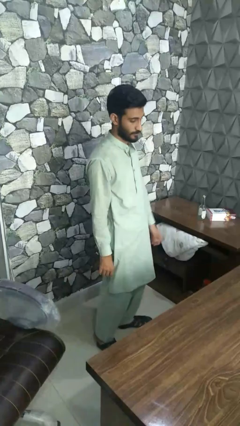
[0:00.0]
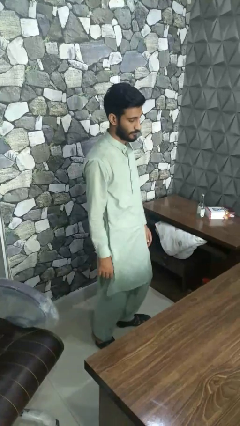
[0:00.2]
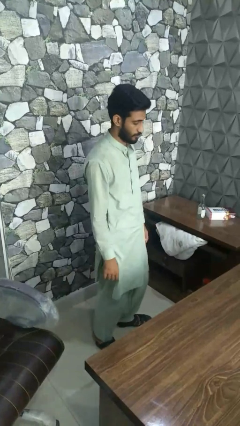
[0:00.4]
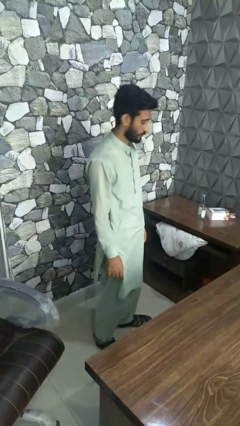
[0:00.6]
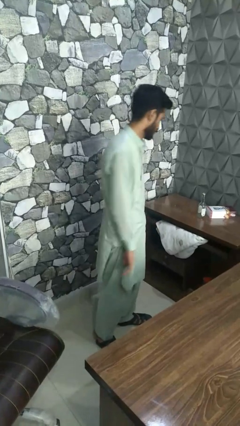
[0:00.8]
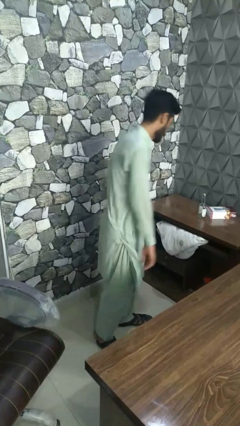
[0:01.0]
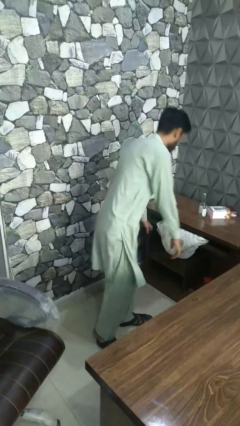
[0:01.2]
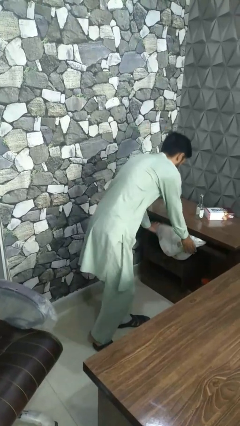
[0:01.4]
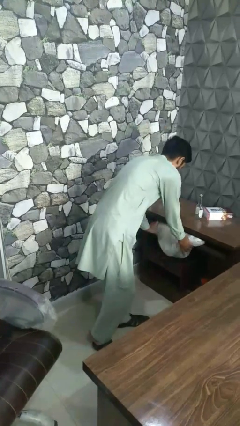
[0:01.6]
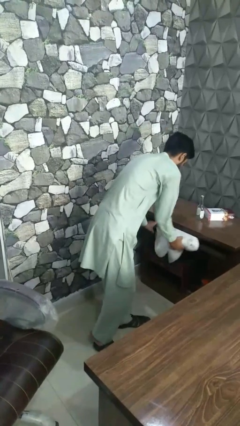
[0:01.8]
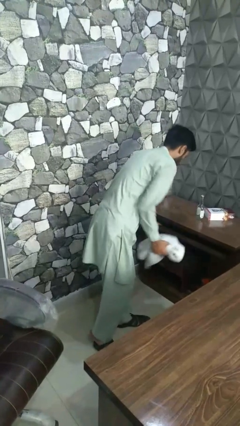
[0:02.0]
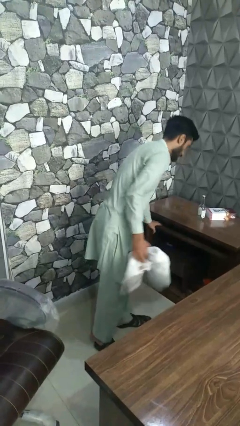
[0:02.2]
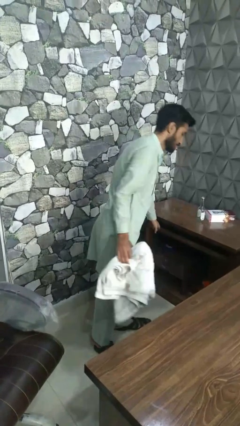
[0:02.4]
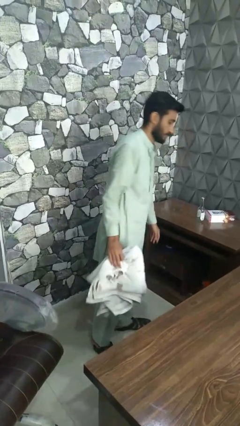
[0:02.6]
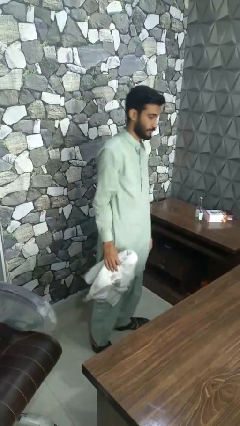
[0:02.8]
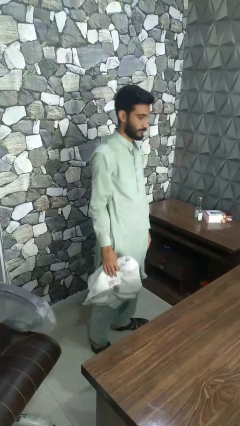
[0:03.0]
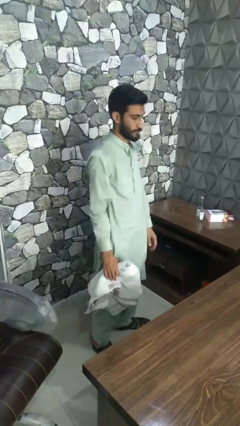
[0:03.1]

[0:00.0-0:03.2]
person takes clothes from dresser

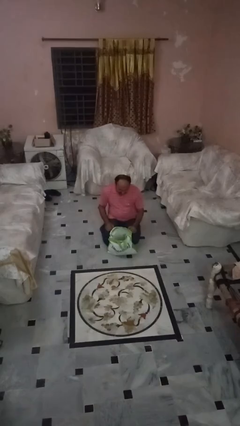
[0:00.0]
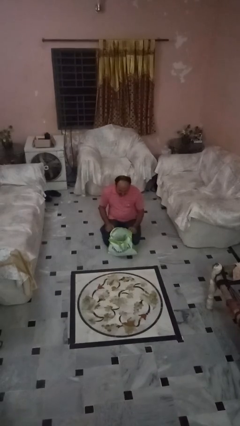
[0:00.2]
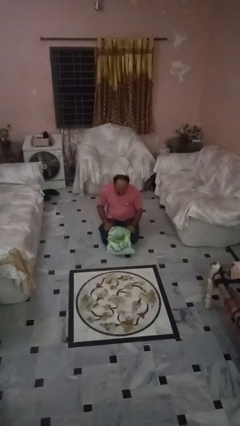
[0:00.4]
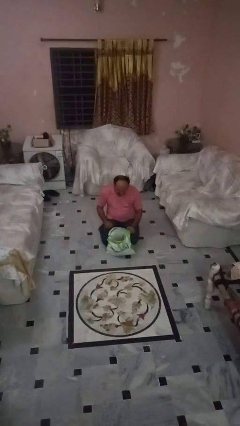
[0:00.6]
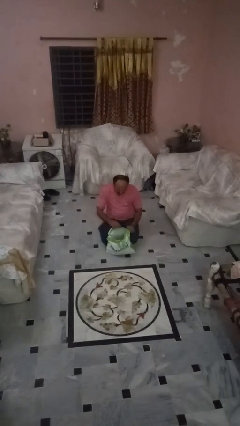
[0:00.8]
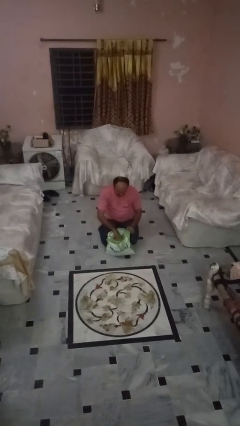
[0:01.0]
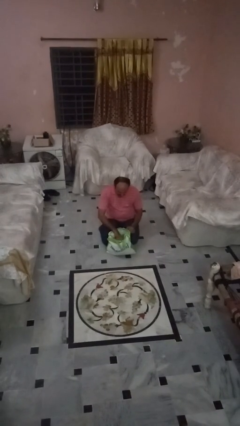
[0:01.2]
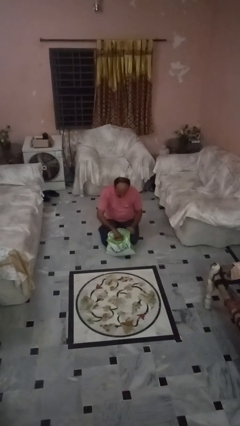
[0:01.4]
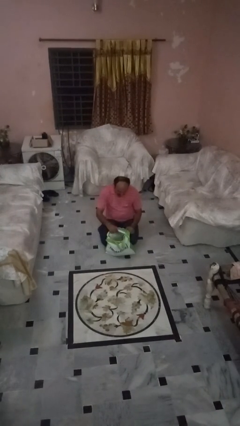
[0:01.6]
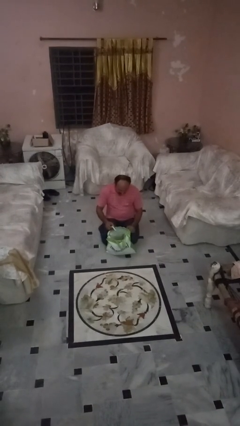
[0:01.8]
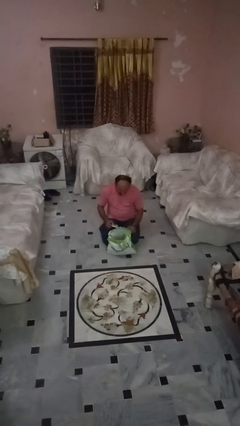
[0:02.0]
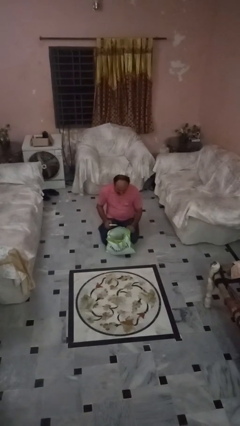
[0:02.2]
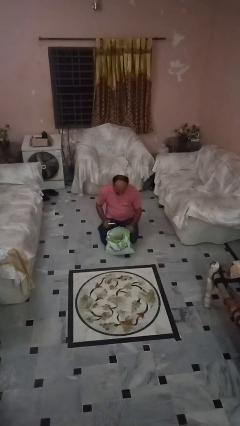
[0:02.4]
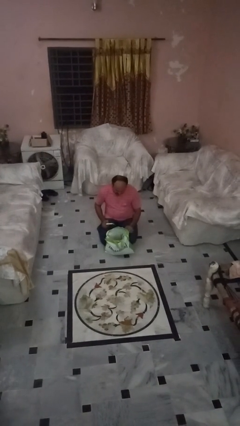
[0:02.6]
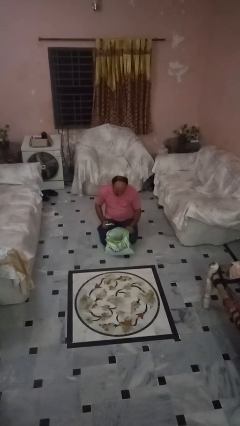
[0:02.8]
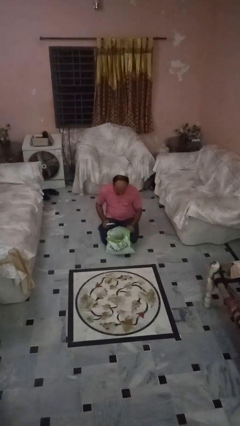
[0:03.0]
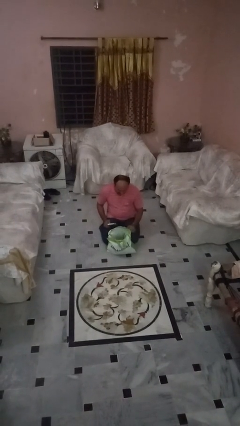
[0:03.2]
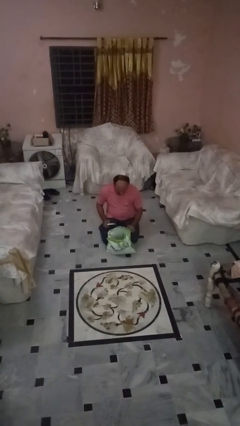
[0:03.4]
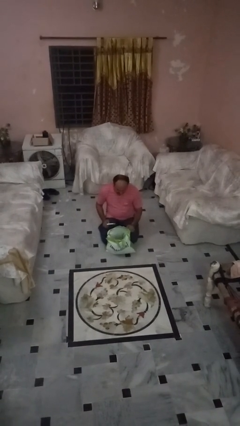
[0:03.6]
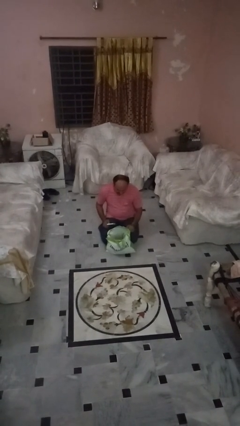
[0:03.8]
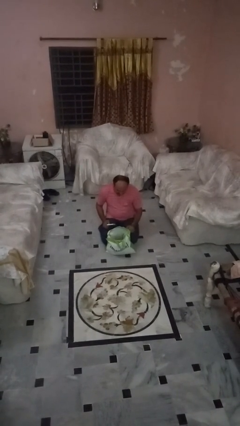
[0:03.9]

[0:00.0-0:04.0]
person takes object from bag

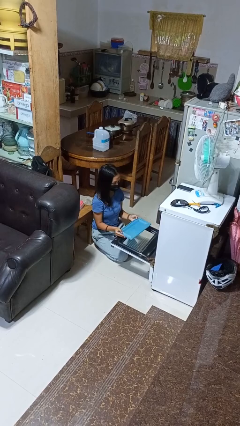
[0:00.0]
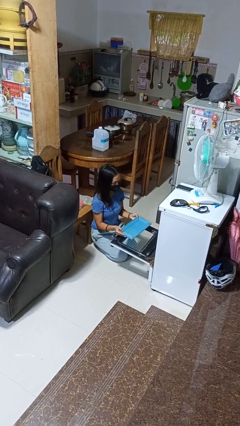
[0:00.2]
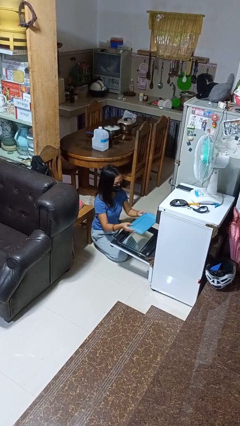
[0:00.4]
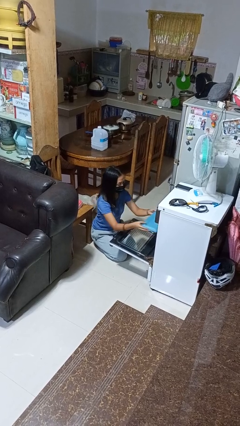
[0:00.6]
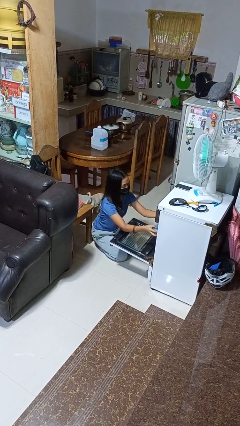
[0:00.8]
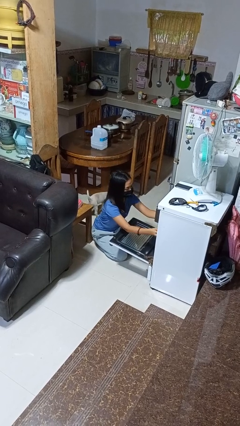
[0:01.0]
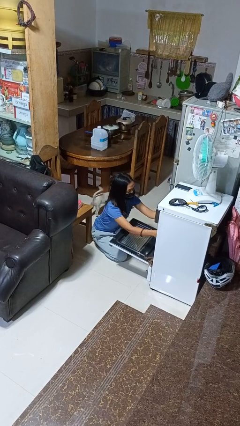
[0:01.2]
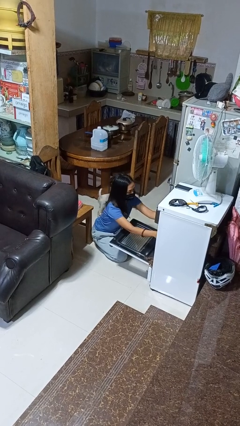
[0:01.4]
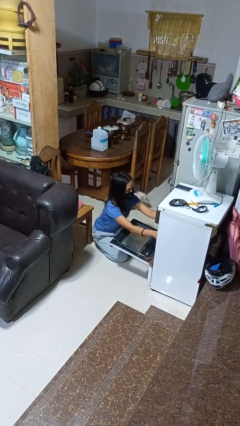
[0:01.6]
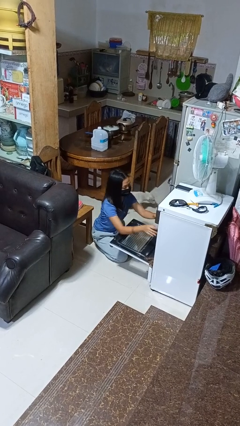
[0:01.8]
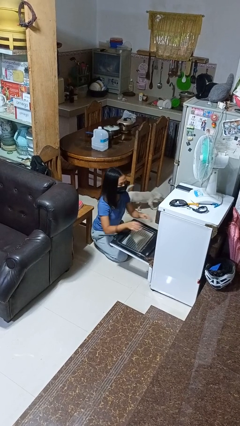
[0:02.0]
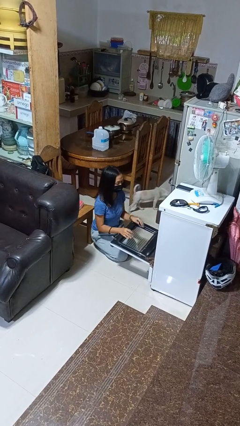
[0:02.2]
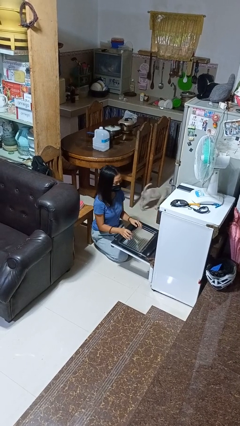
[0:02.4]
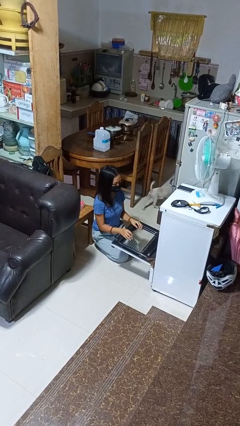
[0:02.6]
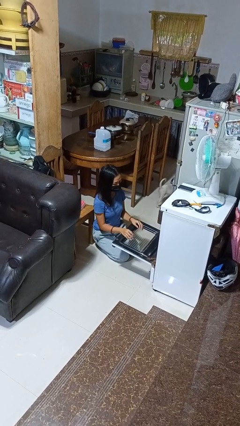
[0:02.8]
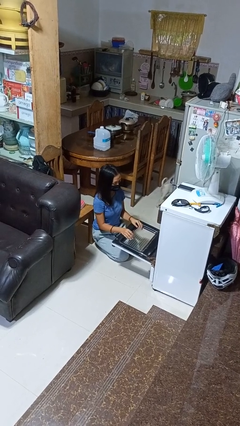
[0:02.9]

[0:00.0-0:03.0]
person puts object into oven

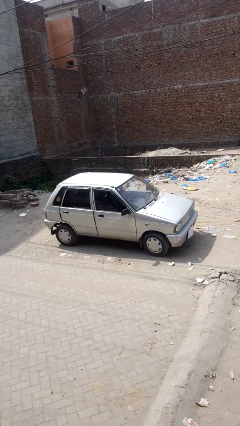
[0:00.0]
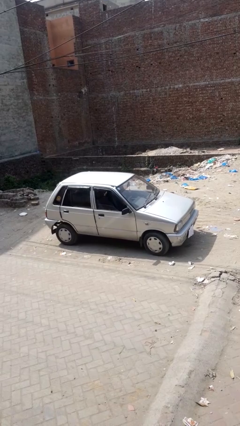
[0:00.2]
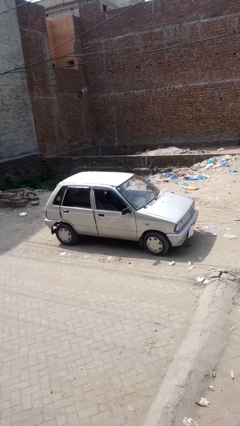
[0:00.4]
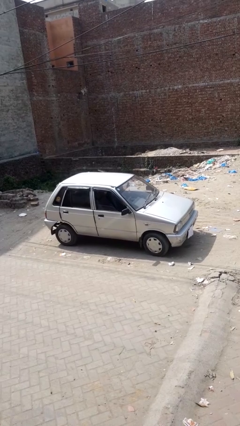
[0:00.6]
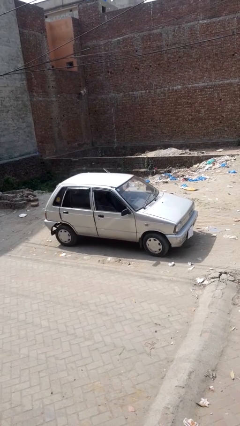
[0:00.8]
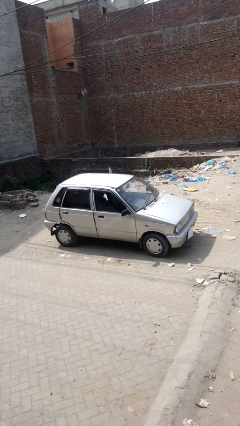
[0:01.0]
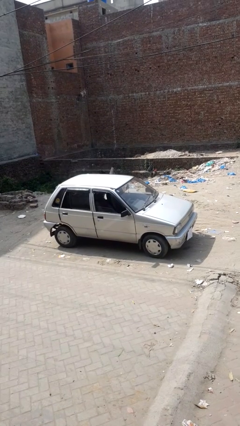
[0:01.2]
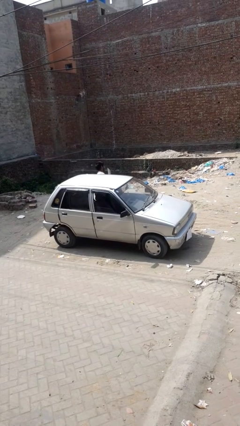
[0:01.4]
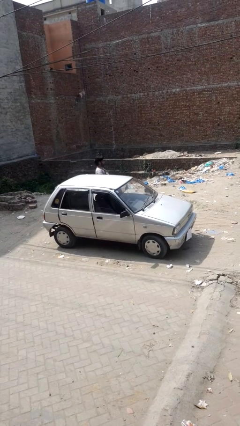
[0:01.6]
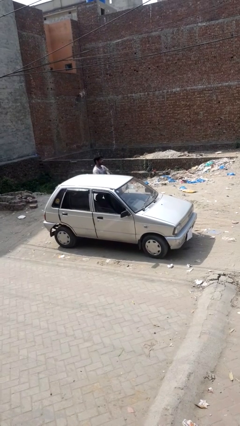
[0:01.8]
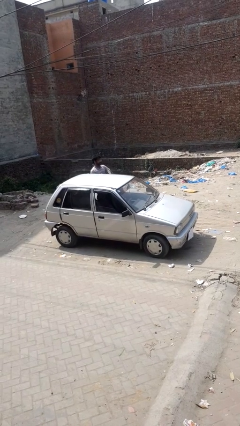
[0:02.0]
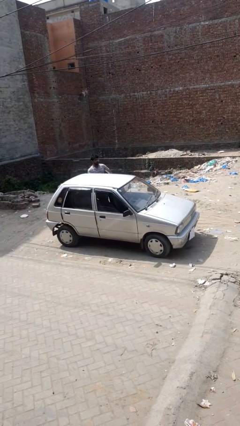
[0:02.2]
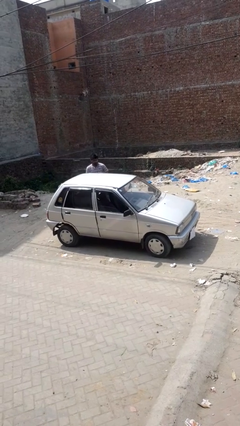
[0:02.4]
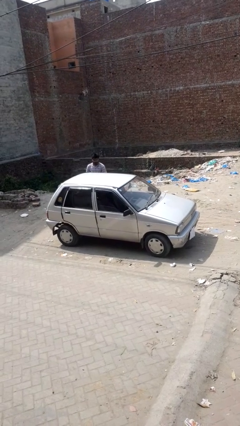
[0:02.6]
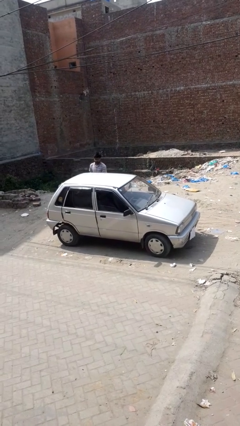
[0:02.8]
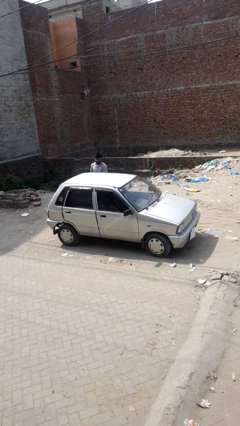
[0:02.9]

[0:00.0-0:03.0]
car drops off person

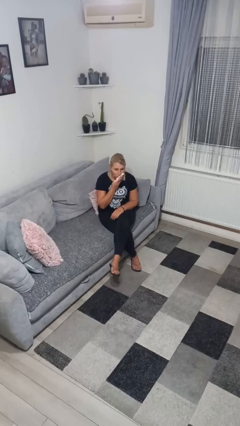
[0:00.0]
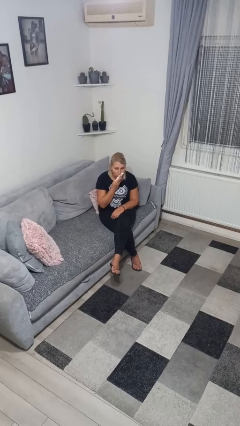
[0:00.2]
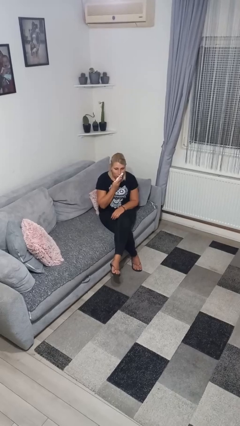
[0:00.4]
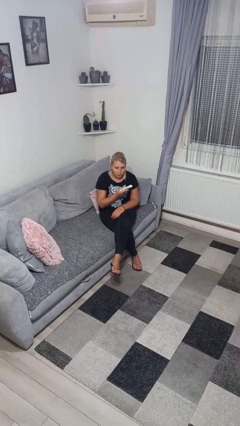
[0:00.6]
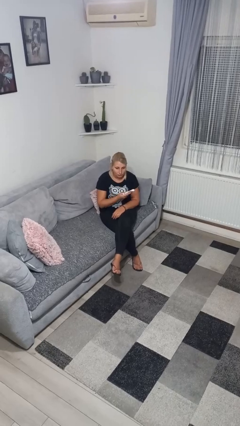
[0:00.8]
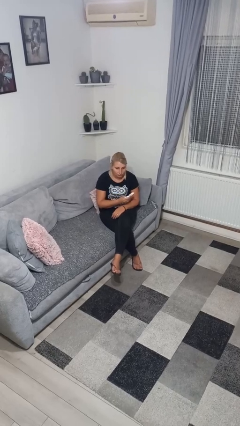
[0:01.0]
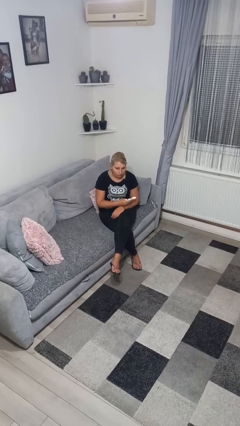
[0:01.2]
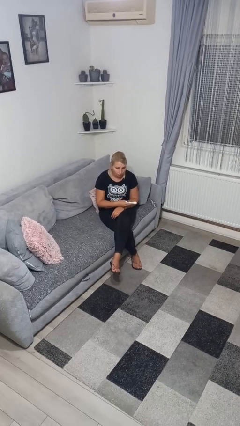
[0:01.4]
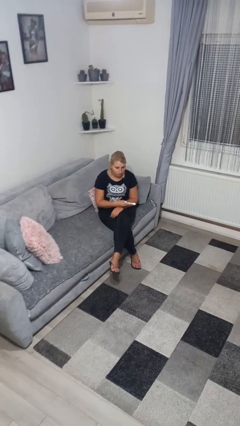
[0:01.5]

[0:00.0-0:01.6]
person wipes mouth with napkin

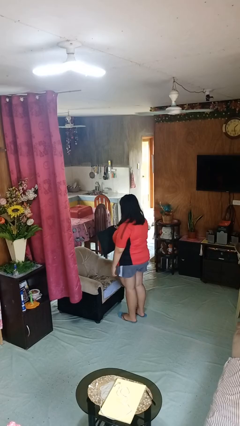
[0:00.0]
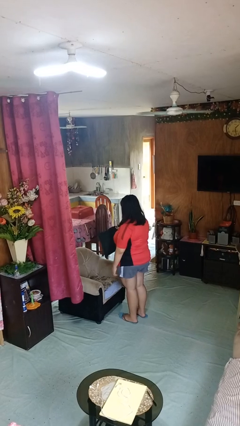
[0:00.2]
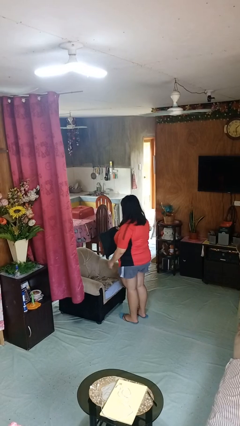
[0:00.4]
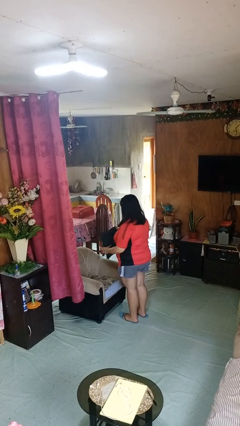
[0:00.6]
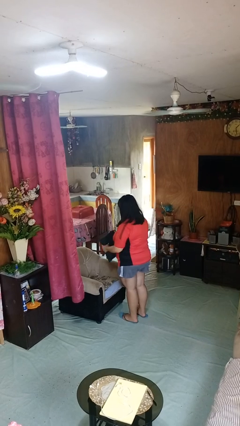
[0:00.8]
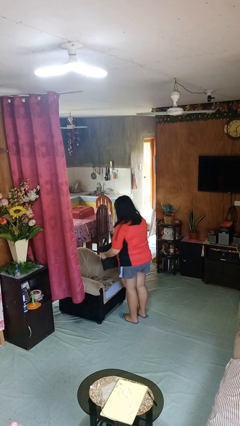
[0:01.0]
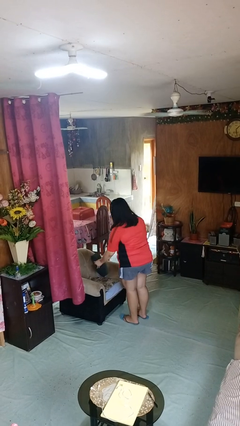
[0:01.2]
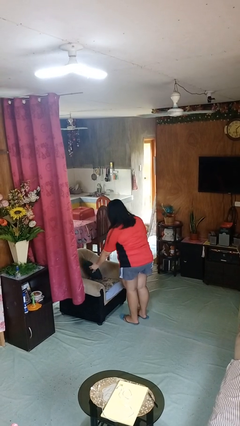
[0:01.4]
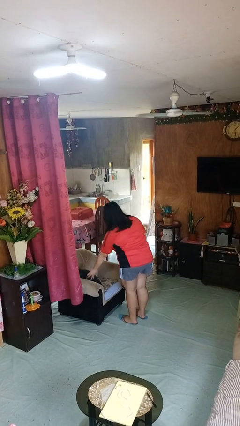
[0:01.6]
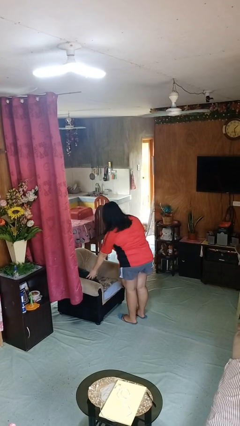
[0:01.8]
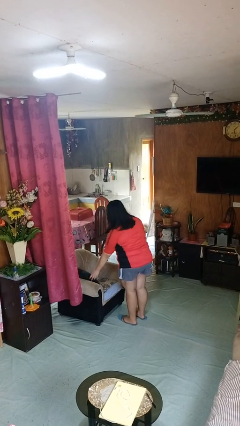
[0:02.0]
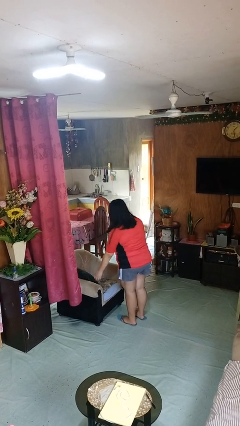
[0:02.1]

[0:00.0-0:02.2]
person puts down object on couch

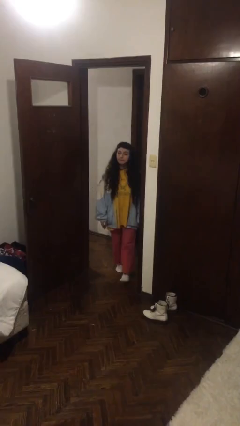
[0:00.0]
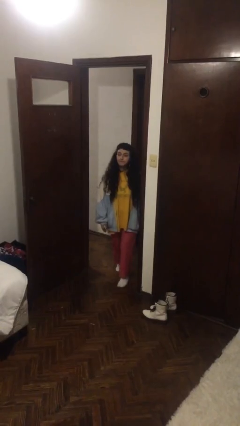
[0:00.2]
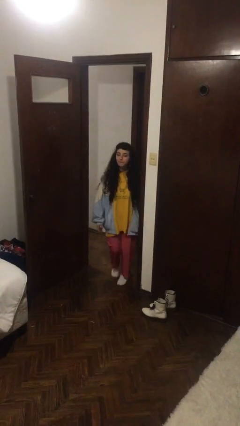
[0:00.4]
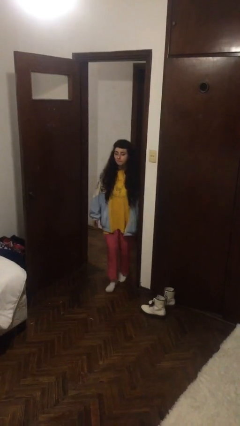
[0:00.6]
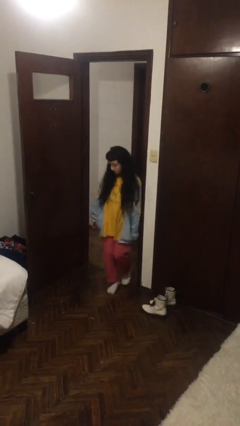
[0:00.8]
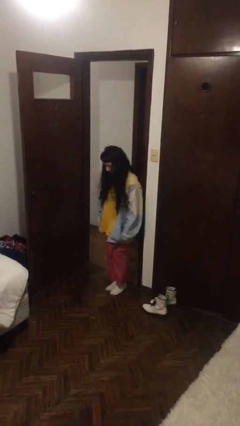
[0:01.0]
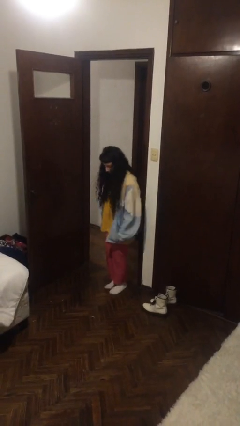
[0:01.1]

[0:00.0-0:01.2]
person bumps into wall
